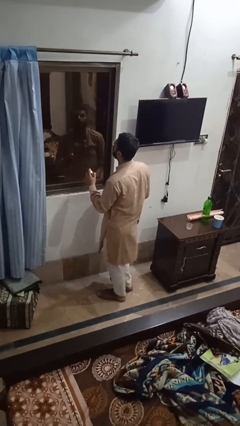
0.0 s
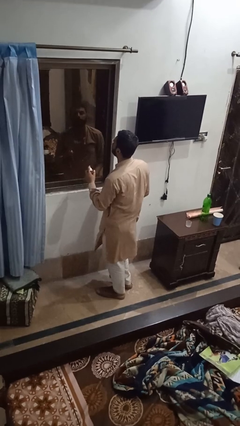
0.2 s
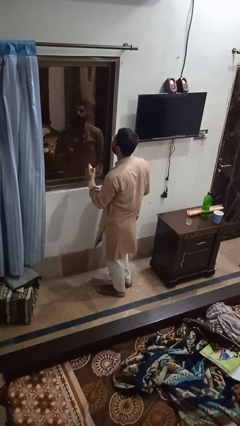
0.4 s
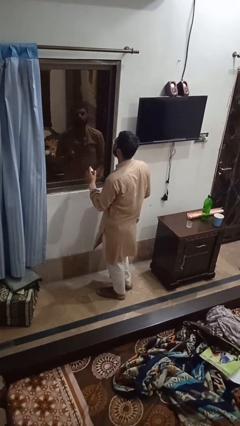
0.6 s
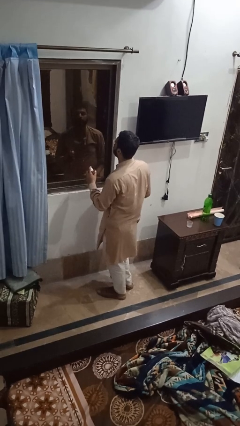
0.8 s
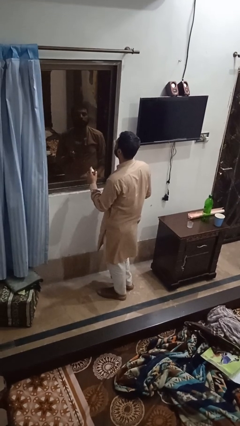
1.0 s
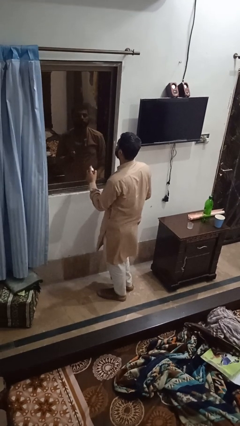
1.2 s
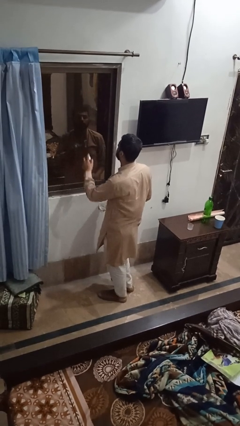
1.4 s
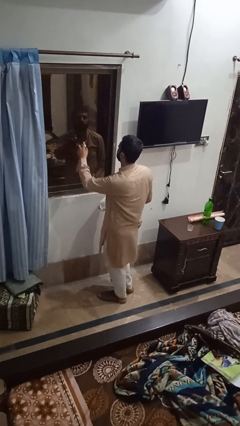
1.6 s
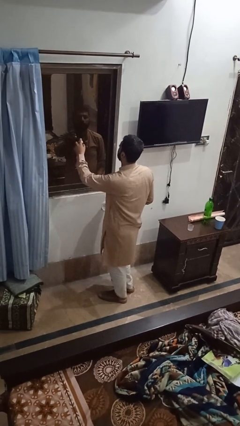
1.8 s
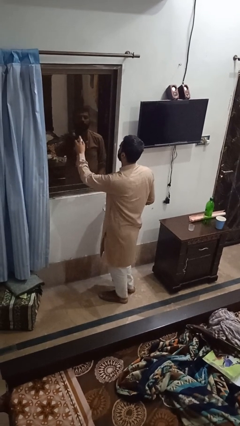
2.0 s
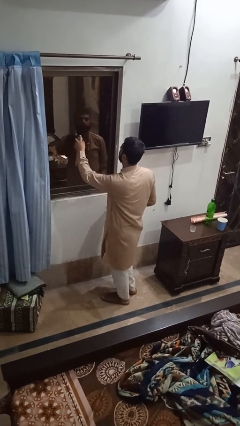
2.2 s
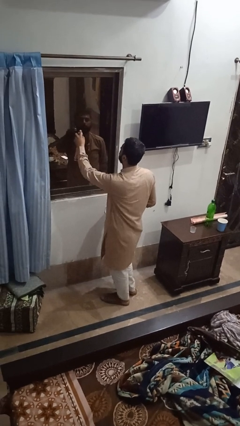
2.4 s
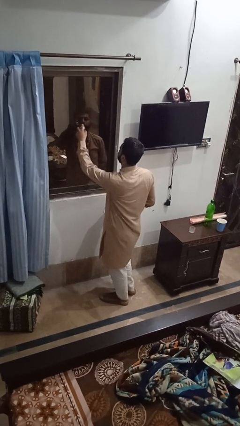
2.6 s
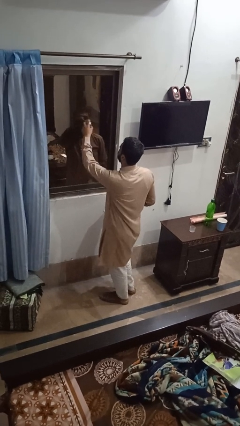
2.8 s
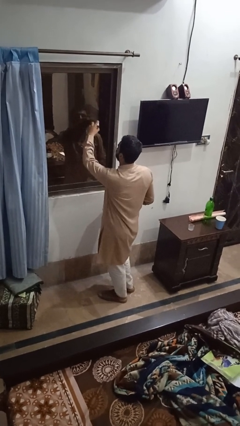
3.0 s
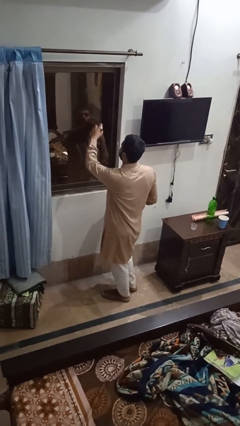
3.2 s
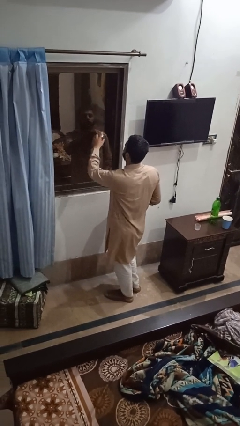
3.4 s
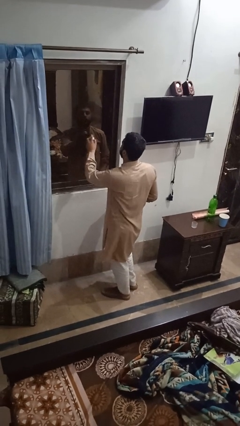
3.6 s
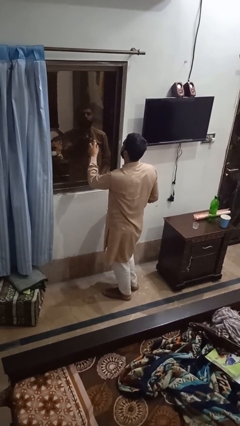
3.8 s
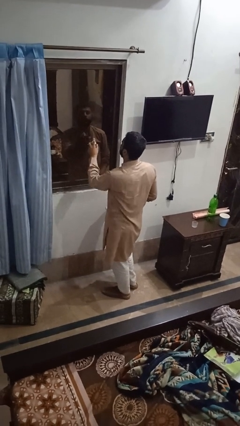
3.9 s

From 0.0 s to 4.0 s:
person sprays from bottle

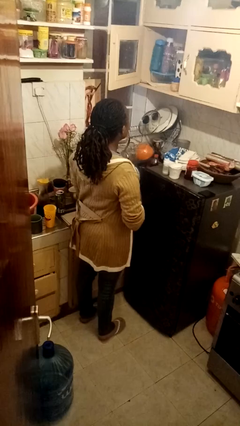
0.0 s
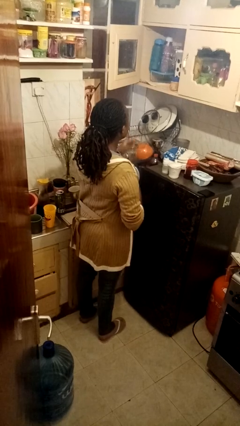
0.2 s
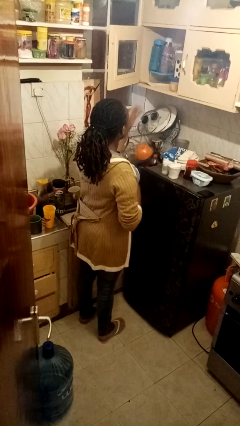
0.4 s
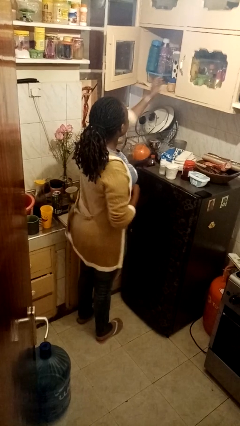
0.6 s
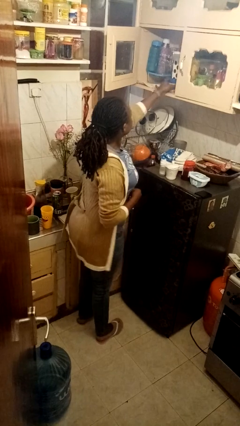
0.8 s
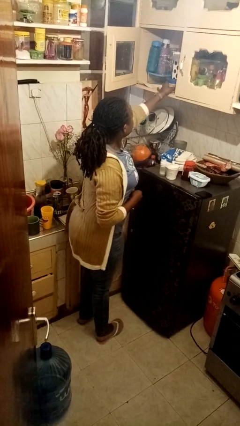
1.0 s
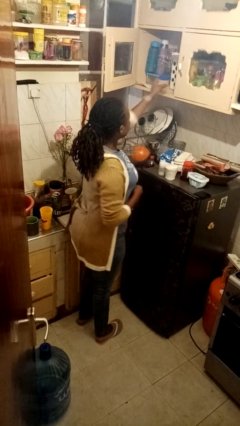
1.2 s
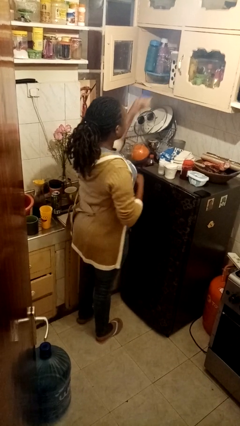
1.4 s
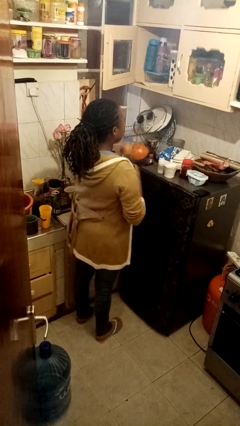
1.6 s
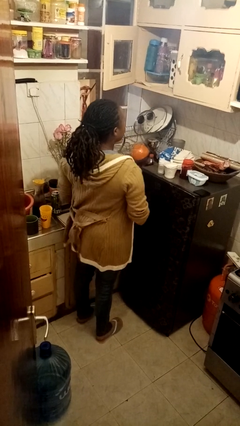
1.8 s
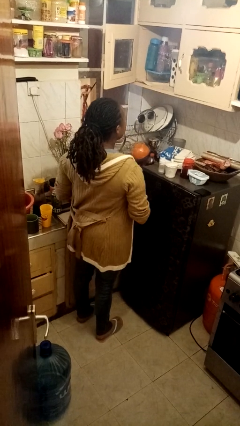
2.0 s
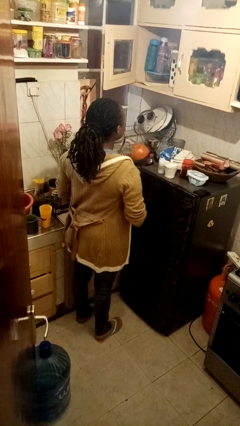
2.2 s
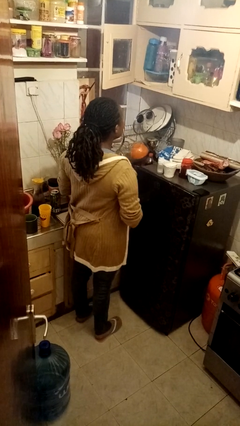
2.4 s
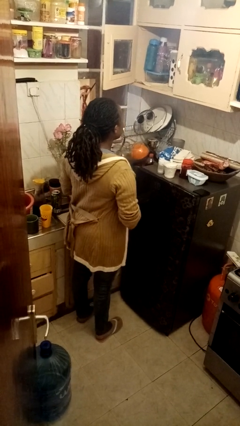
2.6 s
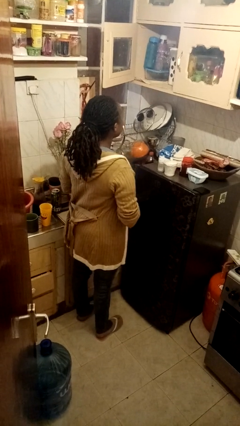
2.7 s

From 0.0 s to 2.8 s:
person picks up object from cabinet

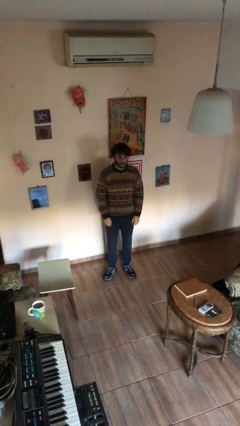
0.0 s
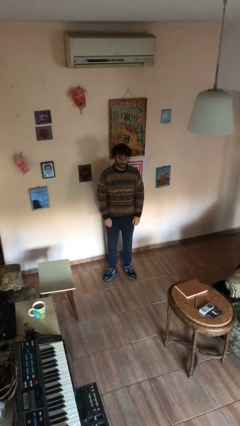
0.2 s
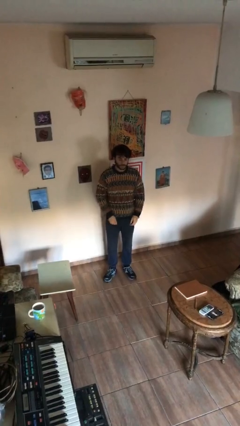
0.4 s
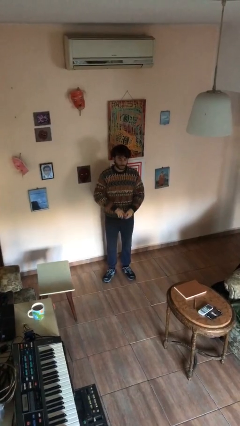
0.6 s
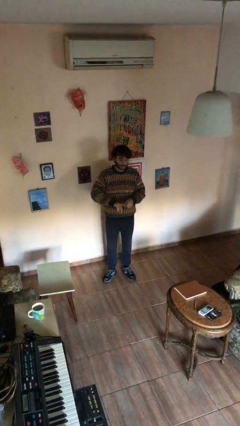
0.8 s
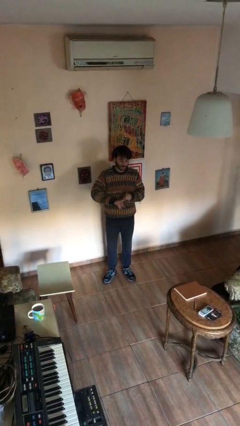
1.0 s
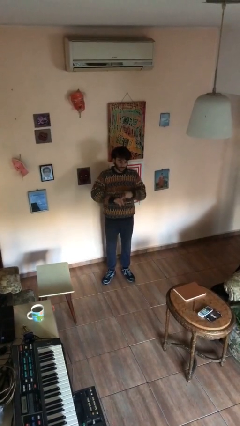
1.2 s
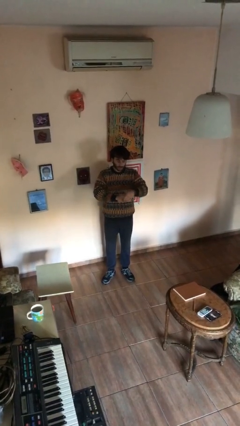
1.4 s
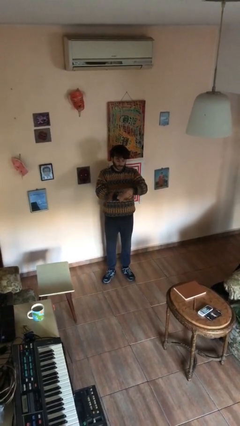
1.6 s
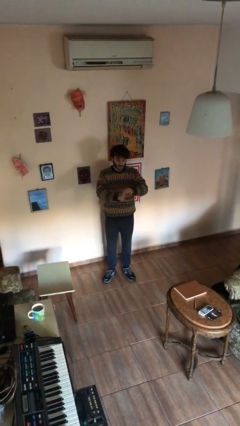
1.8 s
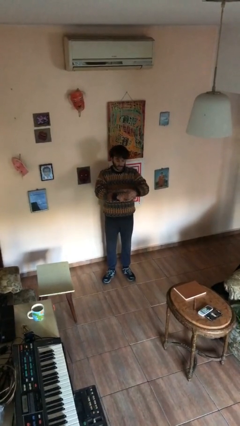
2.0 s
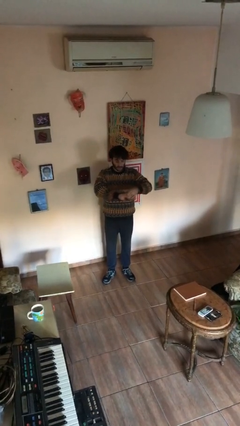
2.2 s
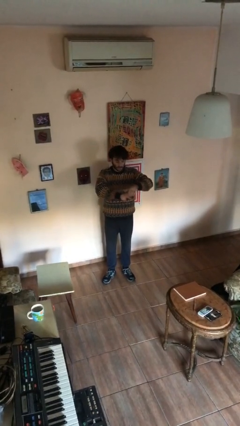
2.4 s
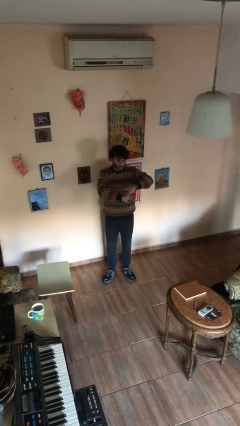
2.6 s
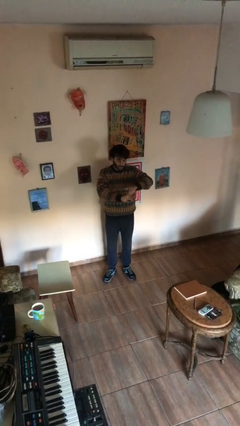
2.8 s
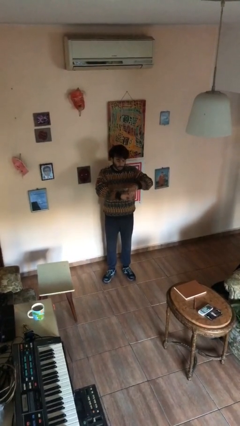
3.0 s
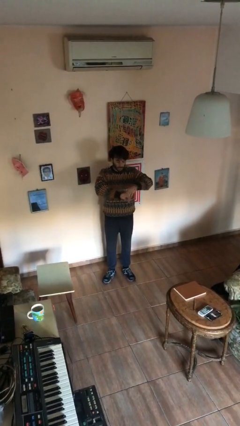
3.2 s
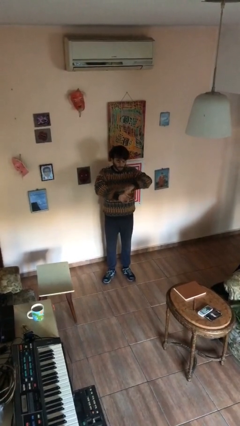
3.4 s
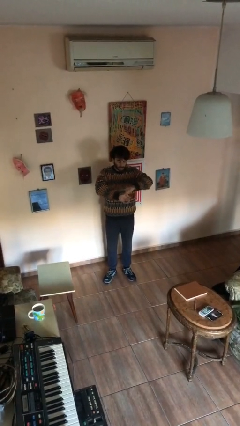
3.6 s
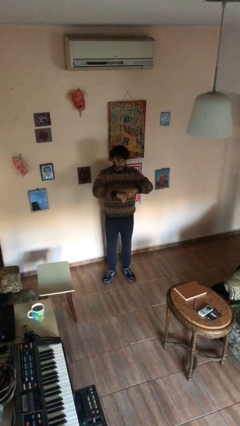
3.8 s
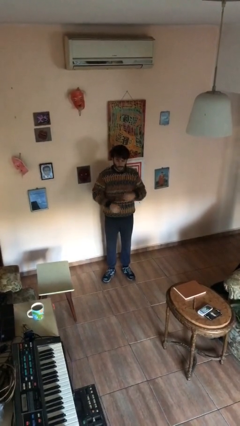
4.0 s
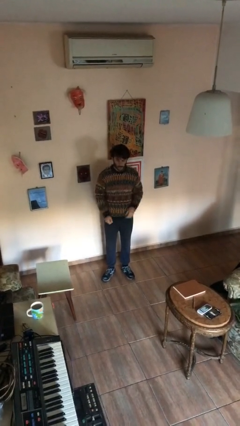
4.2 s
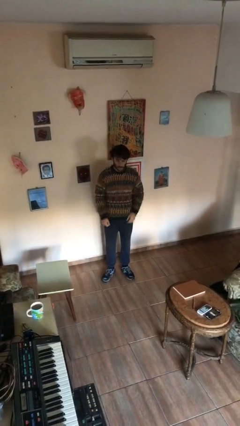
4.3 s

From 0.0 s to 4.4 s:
person cracks knuckles

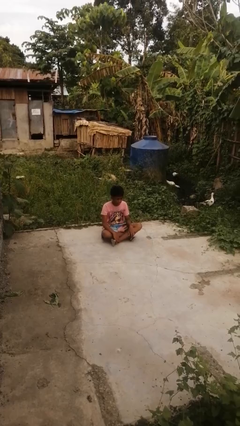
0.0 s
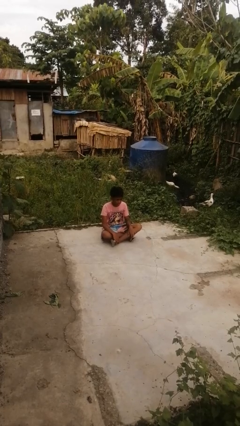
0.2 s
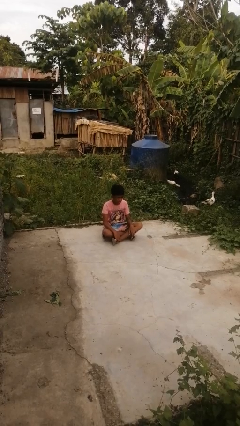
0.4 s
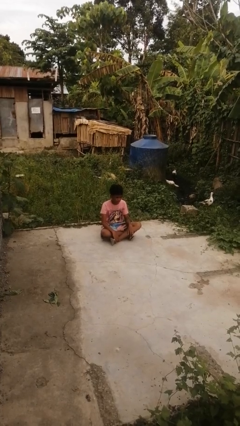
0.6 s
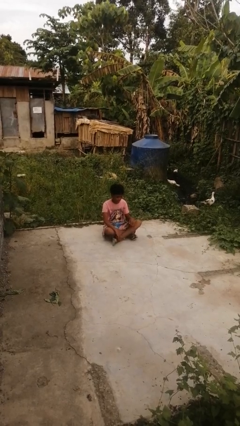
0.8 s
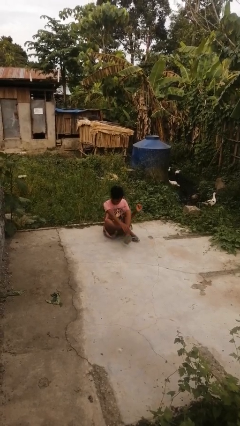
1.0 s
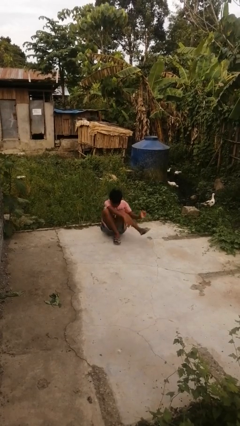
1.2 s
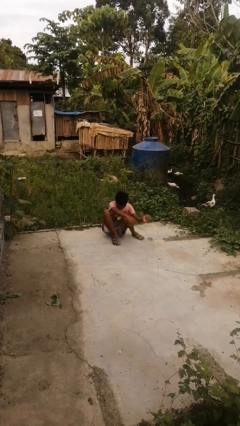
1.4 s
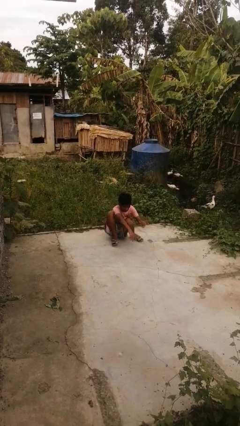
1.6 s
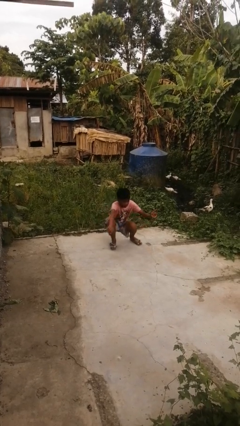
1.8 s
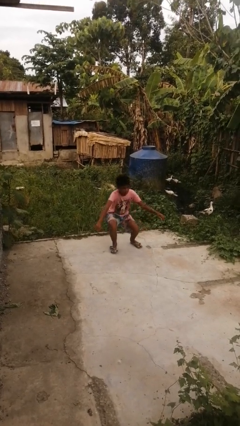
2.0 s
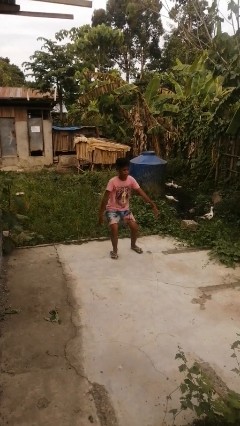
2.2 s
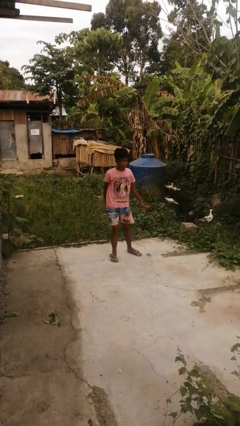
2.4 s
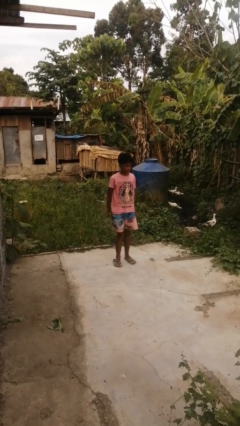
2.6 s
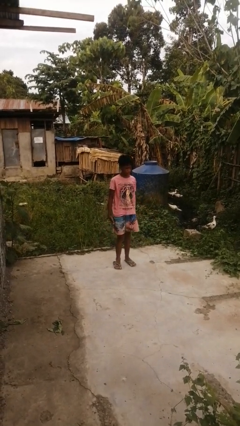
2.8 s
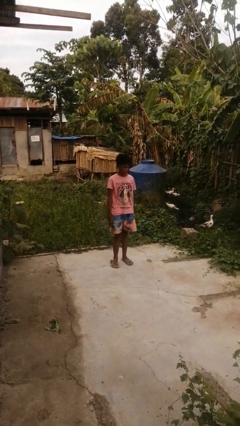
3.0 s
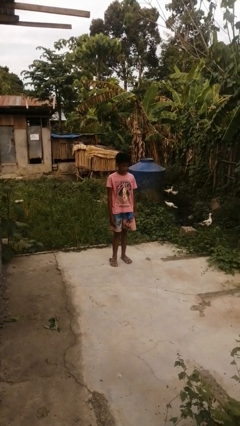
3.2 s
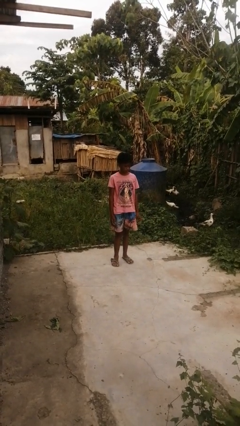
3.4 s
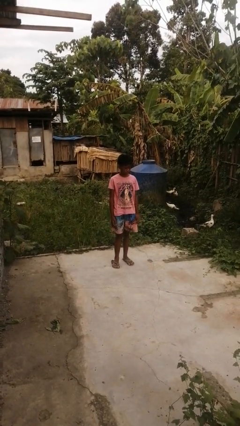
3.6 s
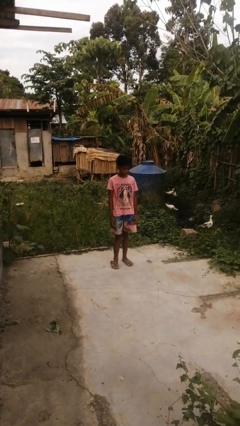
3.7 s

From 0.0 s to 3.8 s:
person stands up from floor

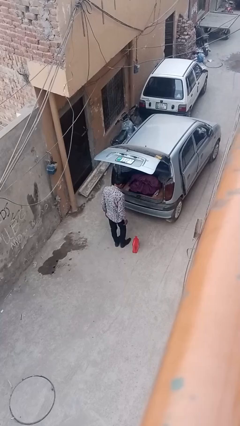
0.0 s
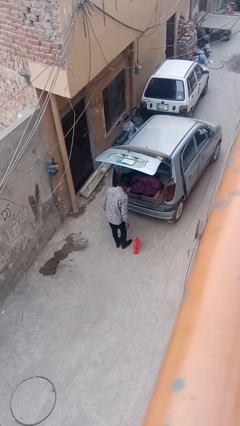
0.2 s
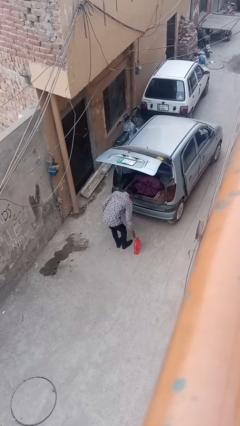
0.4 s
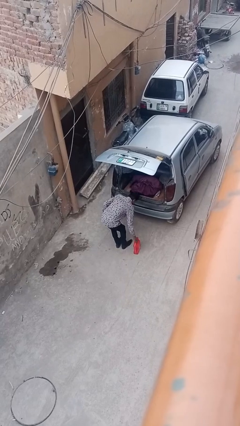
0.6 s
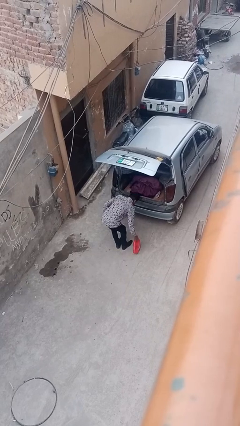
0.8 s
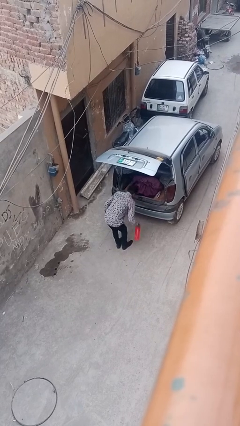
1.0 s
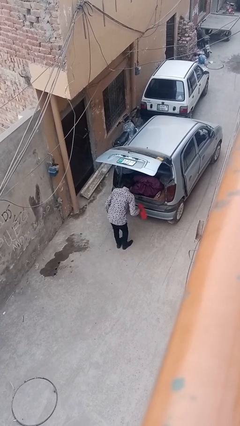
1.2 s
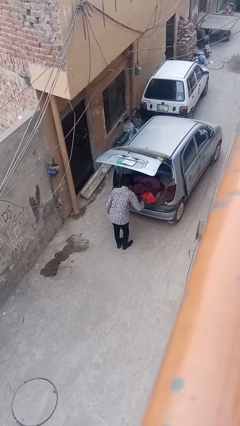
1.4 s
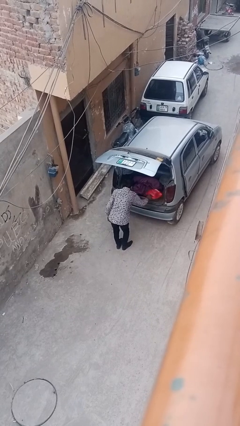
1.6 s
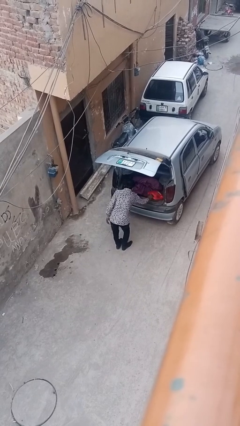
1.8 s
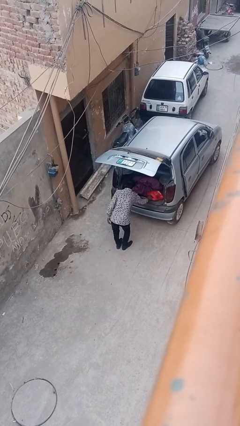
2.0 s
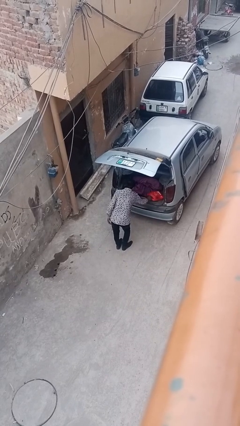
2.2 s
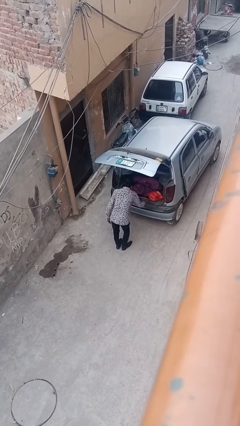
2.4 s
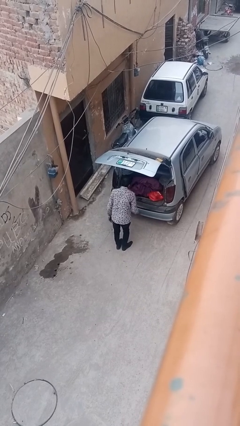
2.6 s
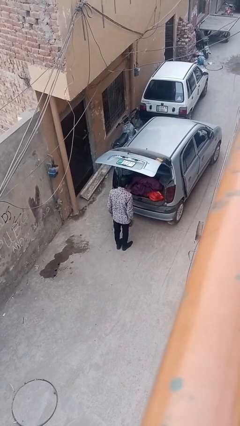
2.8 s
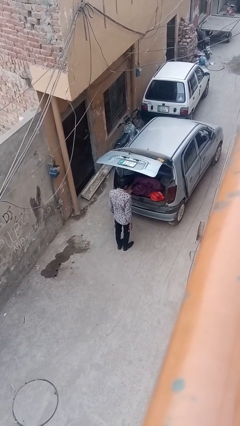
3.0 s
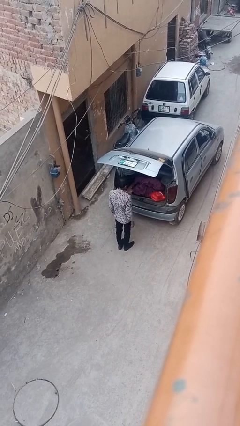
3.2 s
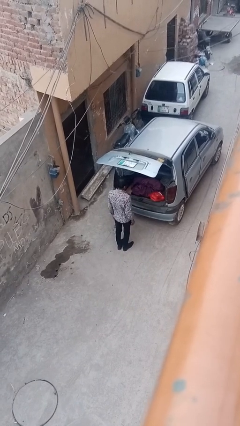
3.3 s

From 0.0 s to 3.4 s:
person loads car
